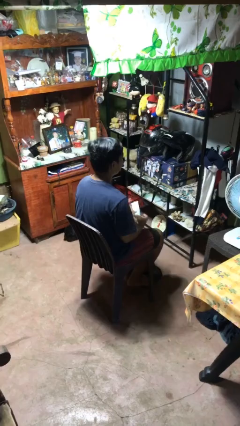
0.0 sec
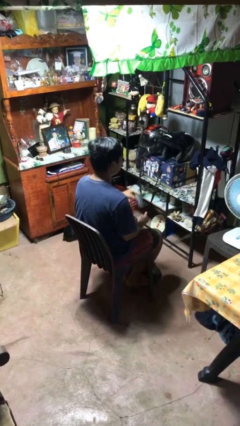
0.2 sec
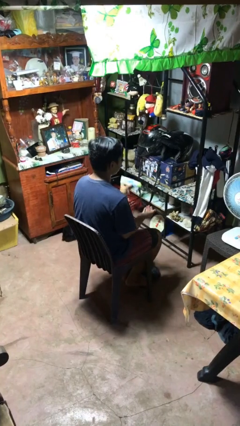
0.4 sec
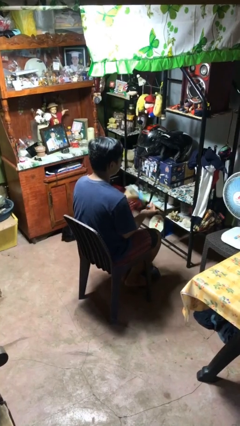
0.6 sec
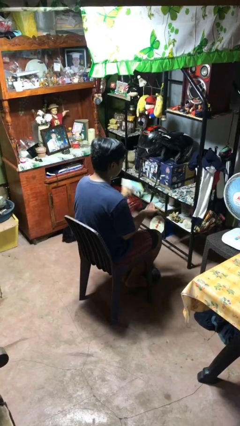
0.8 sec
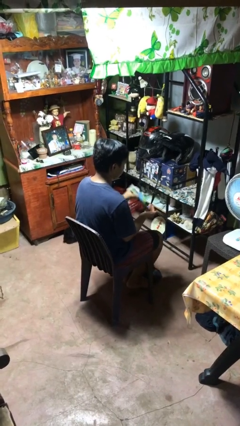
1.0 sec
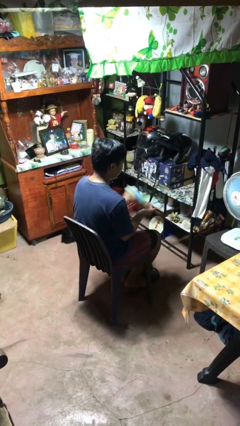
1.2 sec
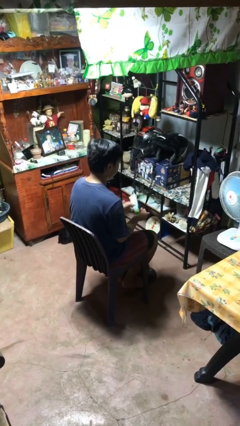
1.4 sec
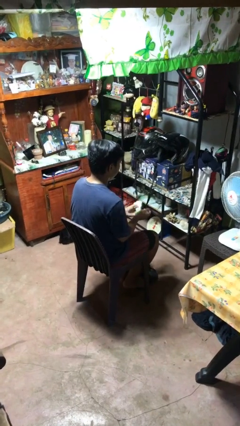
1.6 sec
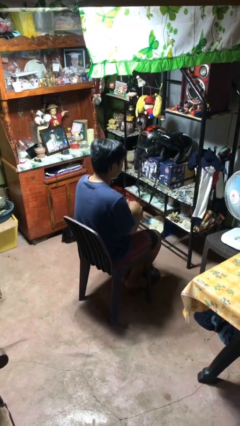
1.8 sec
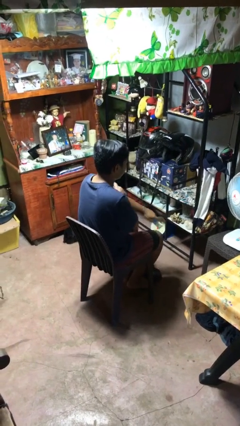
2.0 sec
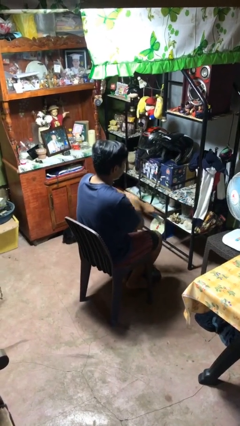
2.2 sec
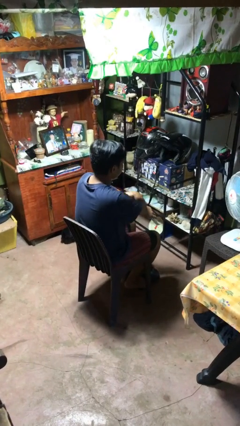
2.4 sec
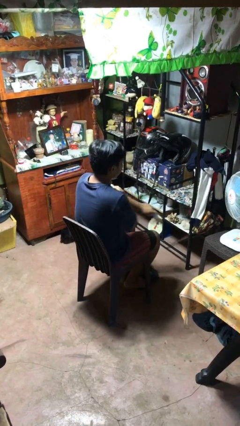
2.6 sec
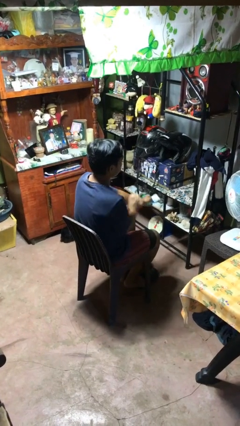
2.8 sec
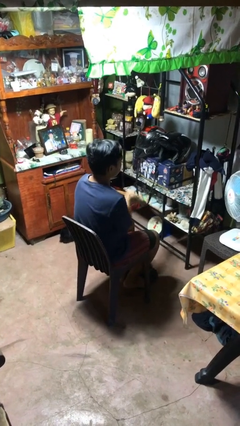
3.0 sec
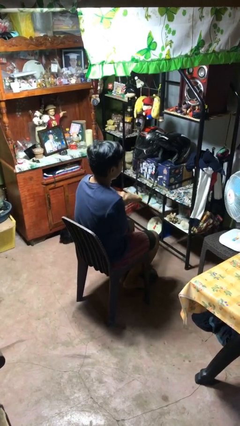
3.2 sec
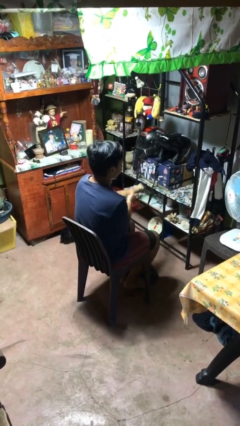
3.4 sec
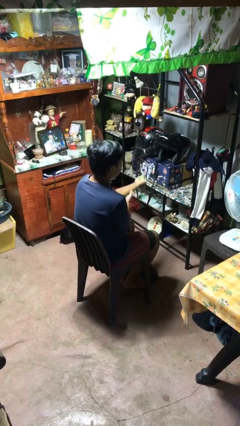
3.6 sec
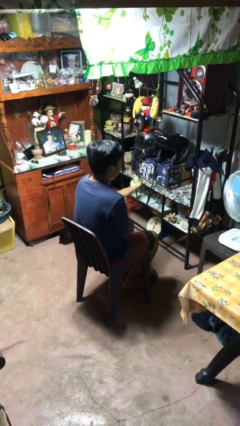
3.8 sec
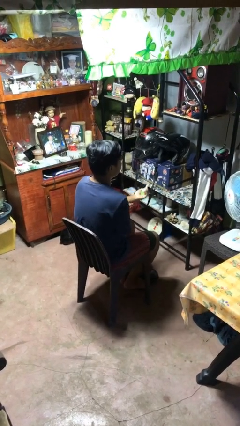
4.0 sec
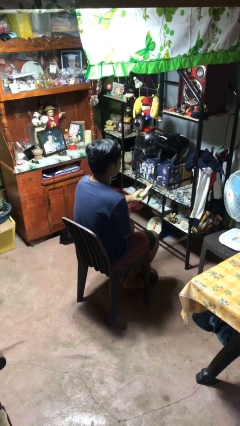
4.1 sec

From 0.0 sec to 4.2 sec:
person applies sunscreen

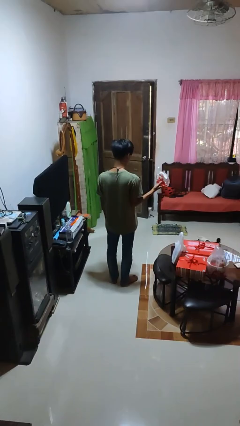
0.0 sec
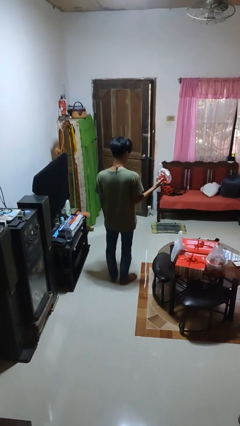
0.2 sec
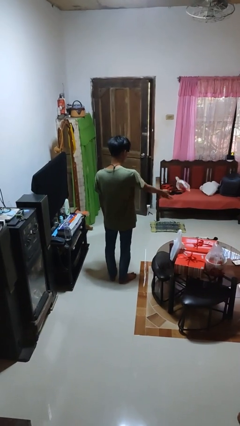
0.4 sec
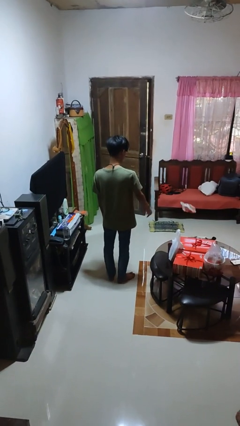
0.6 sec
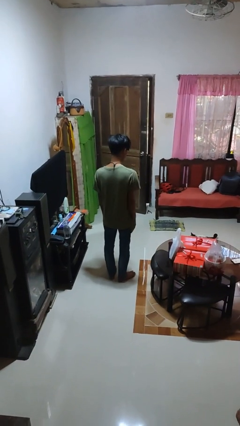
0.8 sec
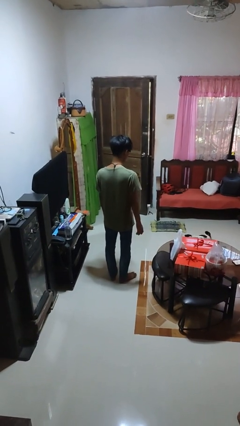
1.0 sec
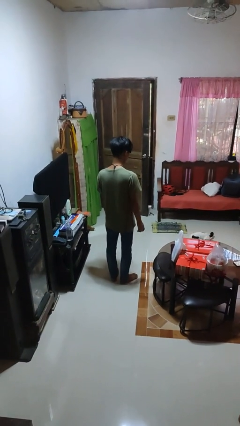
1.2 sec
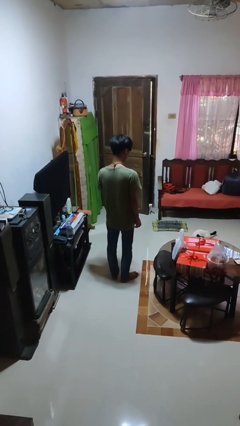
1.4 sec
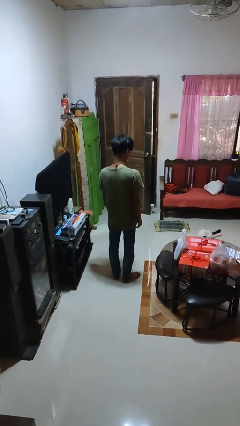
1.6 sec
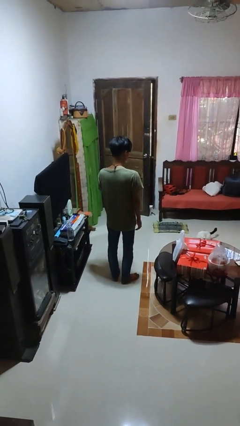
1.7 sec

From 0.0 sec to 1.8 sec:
person throws object to ground

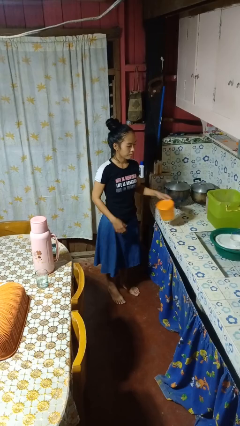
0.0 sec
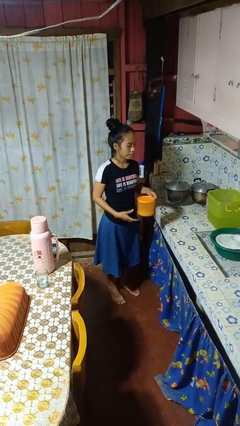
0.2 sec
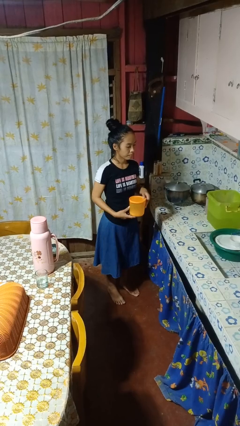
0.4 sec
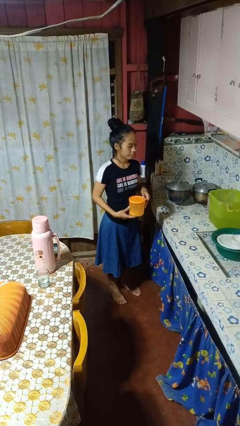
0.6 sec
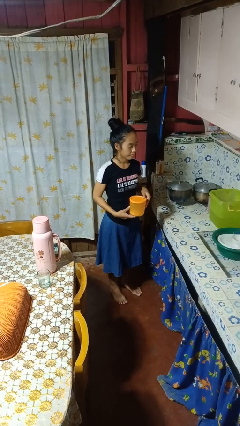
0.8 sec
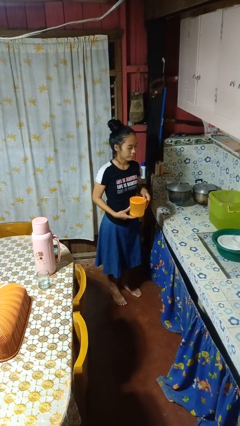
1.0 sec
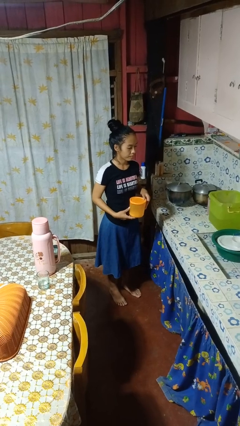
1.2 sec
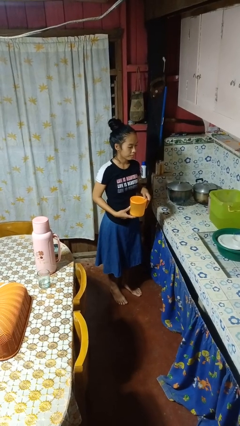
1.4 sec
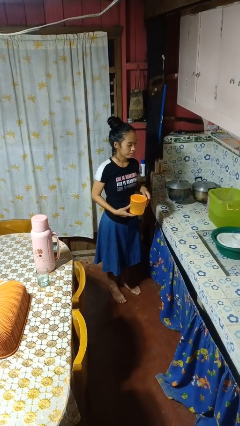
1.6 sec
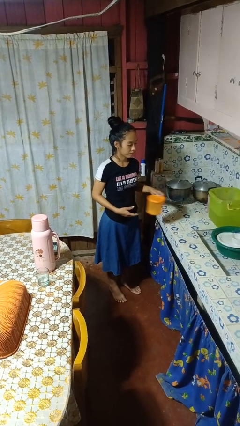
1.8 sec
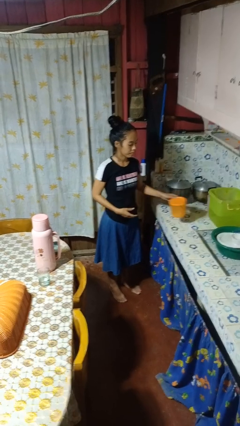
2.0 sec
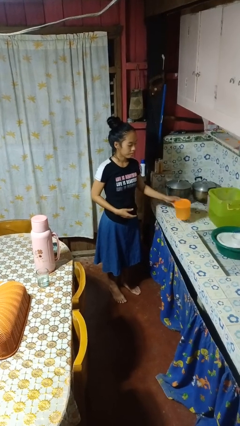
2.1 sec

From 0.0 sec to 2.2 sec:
person picks up object from countertop

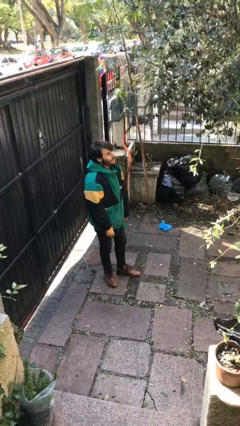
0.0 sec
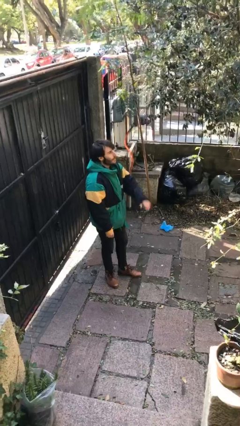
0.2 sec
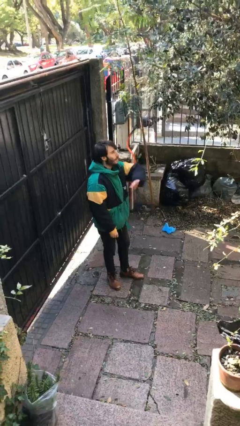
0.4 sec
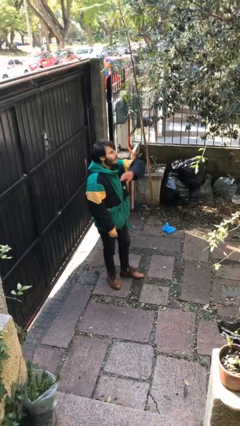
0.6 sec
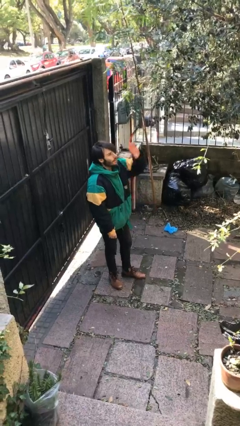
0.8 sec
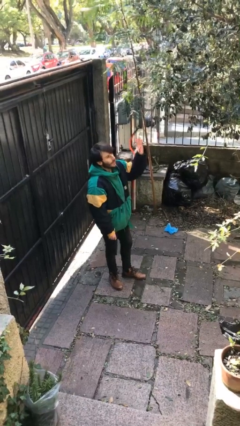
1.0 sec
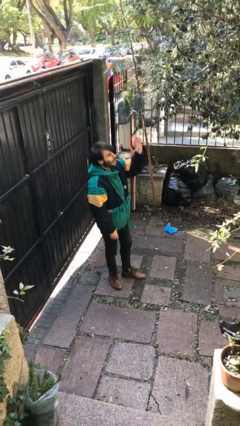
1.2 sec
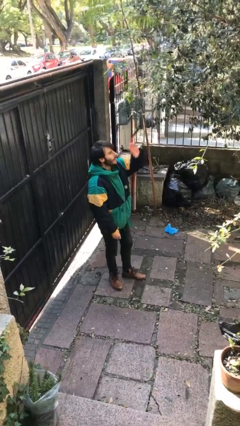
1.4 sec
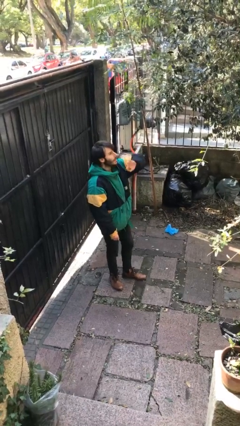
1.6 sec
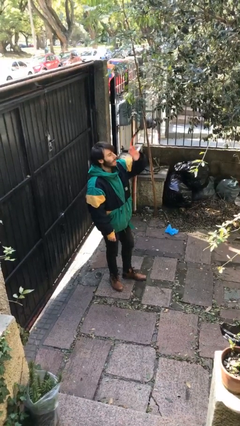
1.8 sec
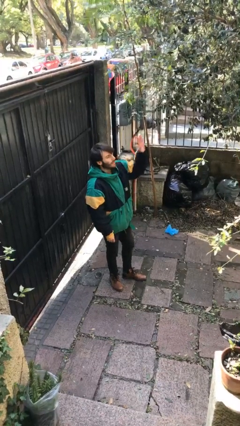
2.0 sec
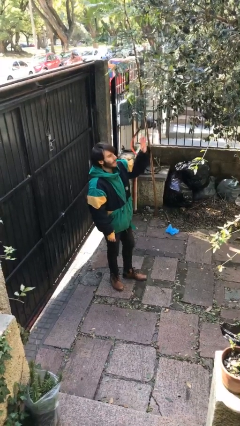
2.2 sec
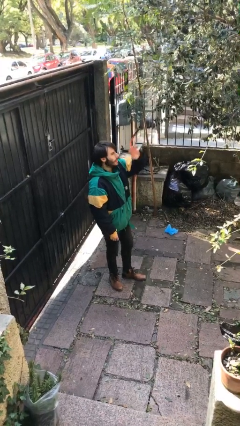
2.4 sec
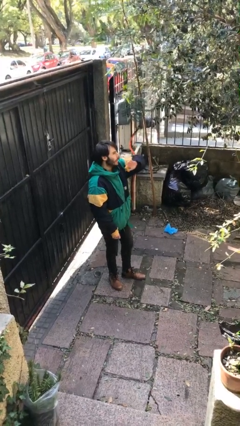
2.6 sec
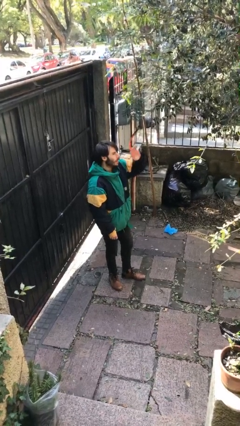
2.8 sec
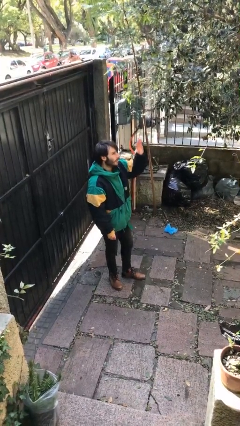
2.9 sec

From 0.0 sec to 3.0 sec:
person waves at person

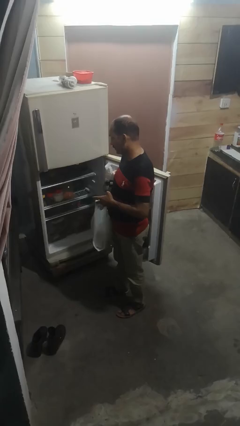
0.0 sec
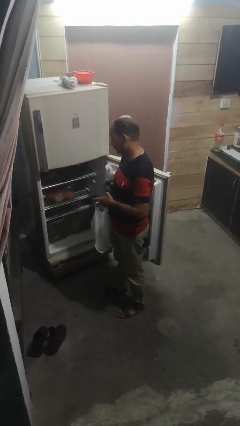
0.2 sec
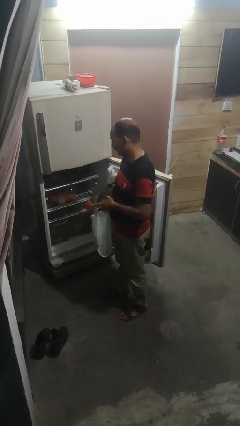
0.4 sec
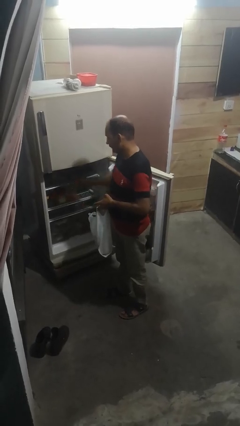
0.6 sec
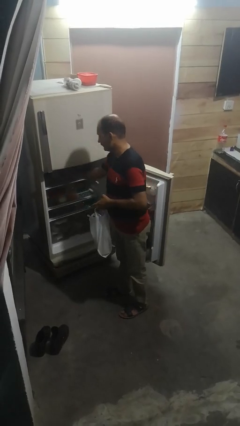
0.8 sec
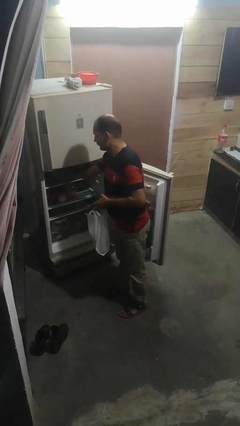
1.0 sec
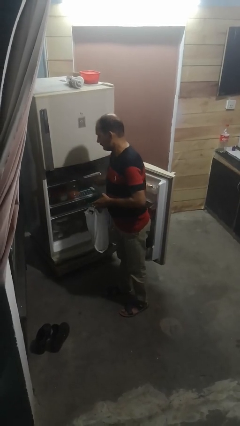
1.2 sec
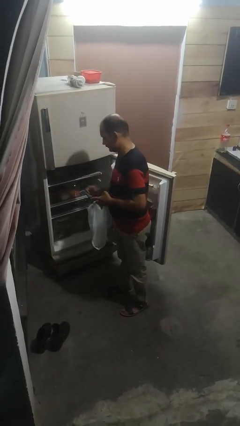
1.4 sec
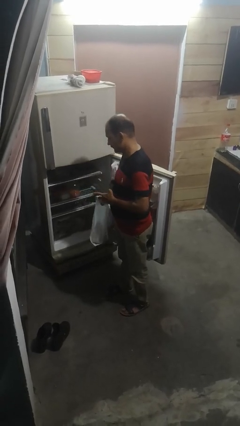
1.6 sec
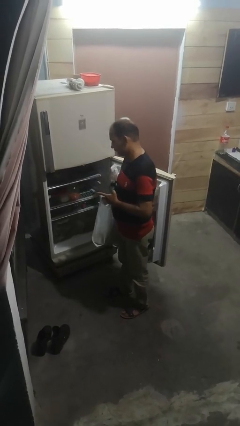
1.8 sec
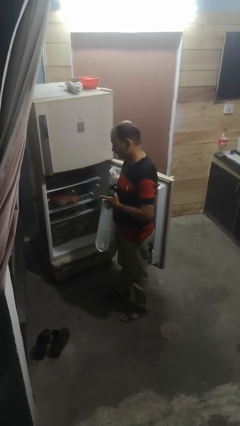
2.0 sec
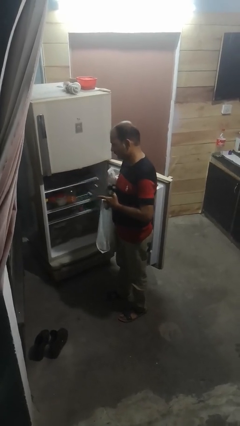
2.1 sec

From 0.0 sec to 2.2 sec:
person loads groceries into refrigerator

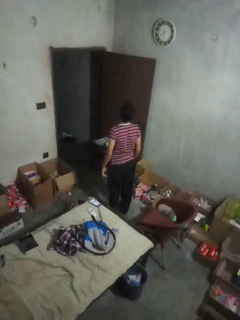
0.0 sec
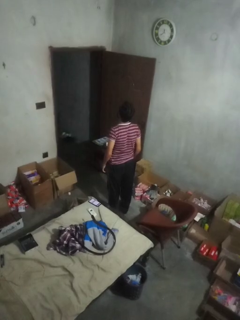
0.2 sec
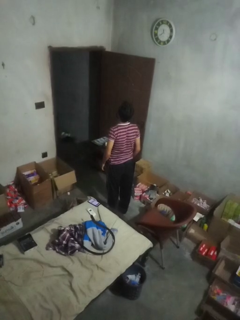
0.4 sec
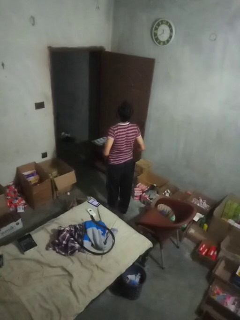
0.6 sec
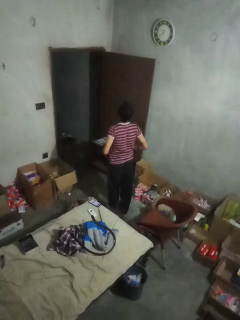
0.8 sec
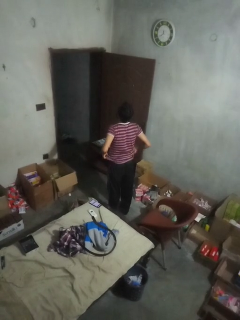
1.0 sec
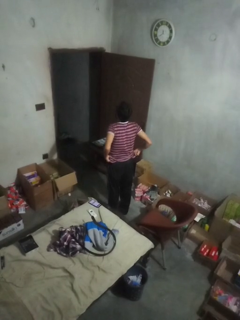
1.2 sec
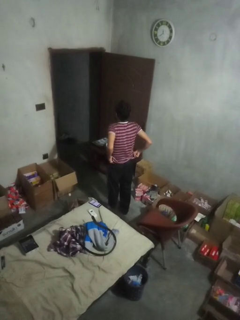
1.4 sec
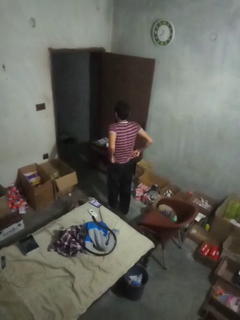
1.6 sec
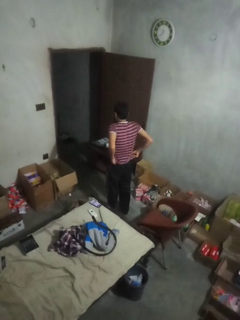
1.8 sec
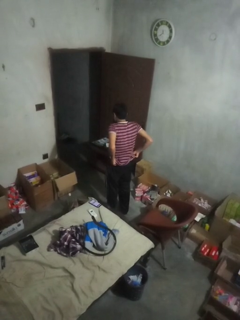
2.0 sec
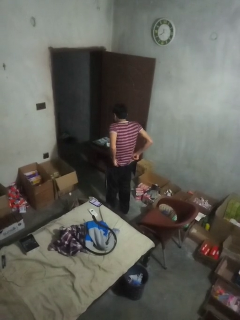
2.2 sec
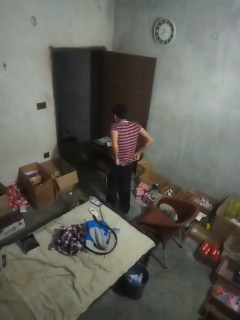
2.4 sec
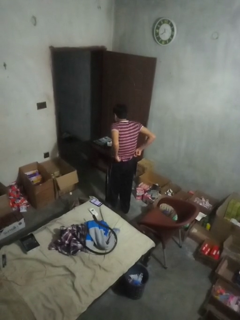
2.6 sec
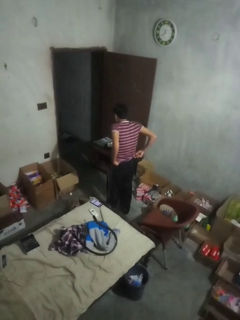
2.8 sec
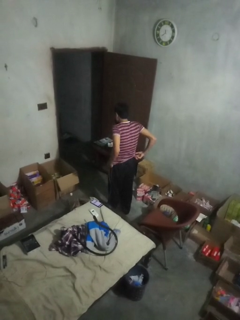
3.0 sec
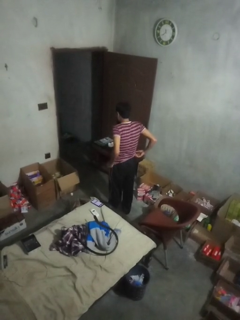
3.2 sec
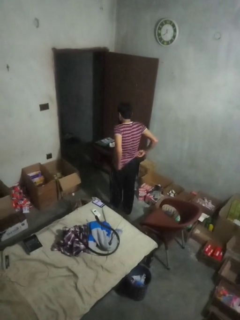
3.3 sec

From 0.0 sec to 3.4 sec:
person hikes up pants

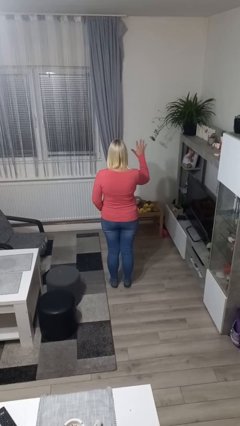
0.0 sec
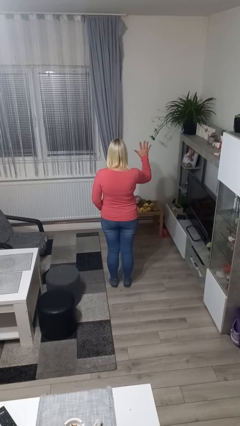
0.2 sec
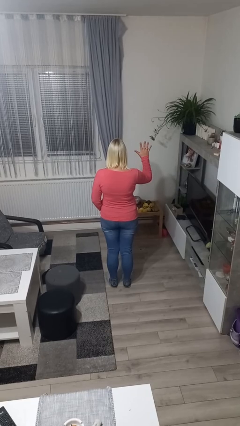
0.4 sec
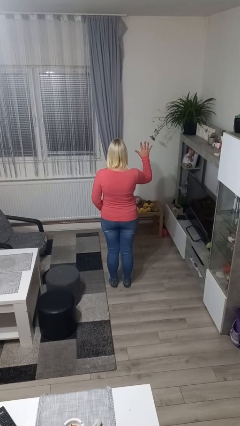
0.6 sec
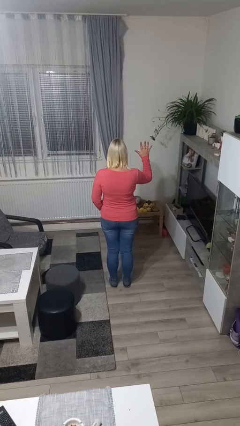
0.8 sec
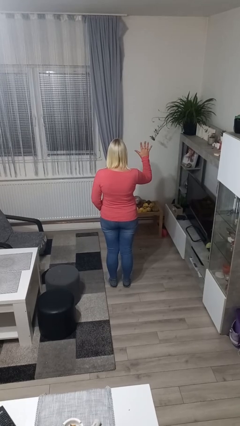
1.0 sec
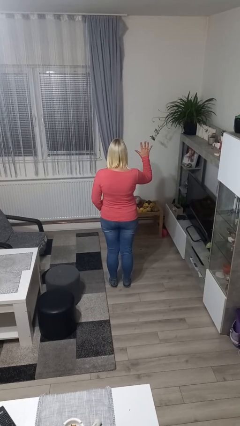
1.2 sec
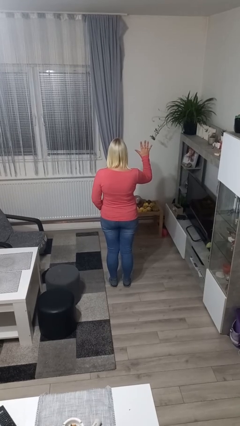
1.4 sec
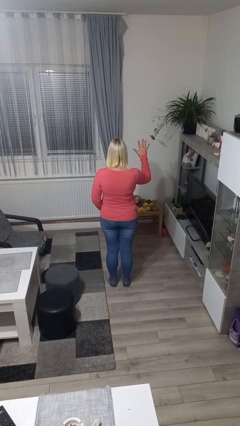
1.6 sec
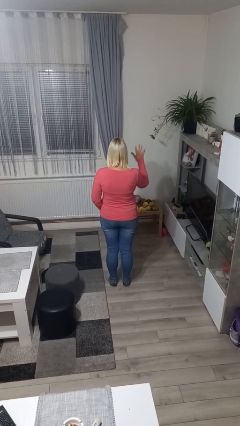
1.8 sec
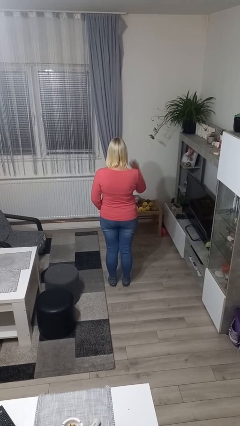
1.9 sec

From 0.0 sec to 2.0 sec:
person gestures number five
